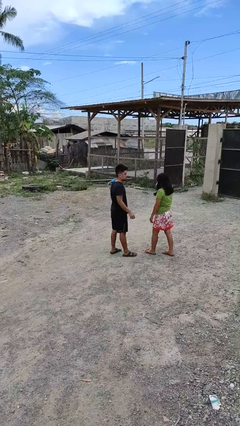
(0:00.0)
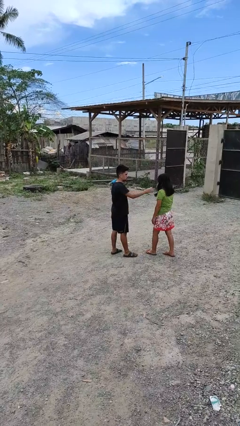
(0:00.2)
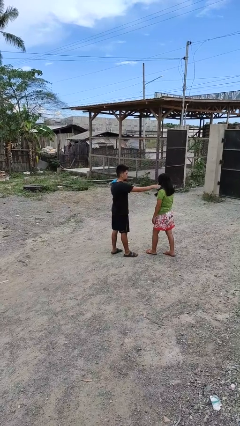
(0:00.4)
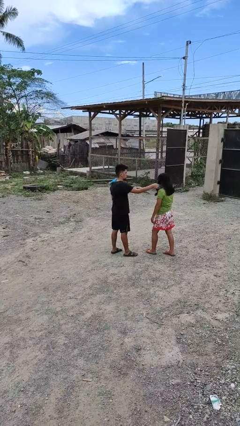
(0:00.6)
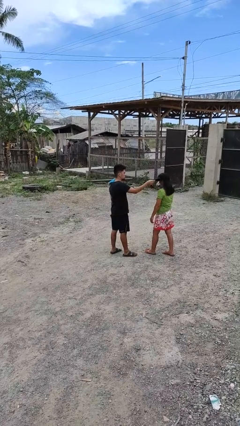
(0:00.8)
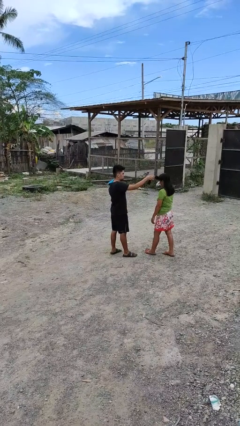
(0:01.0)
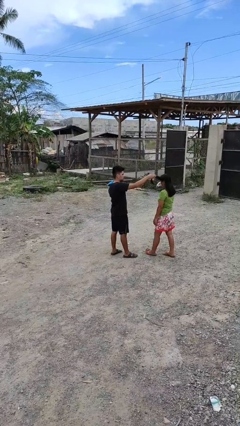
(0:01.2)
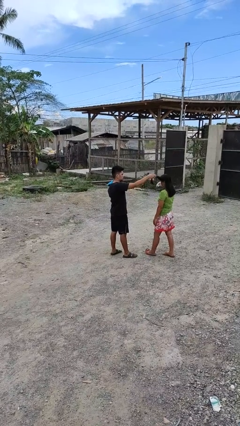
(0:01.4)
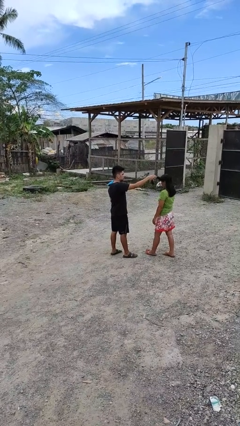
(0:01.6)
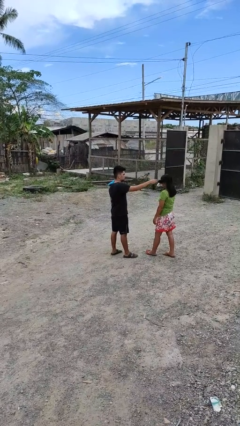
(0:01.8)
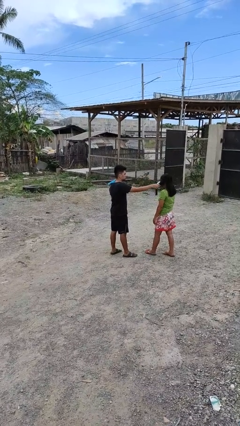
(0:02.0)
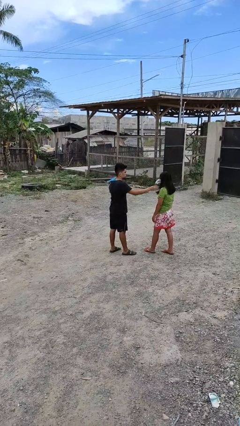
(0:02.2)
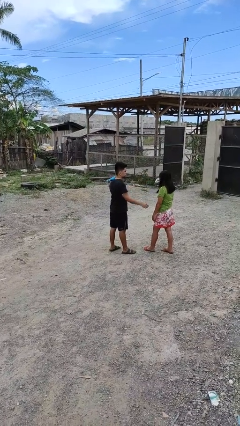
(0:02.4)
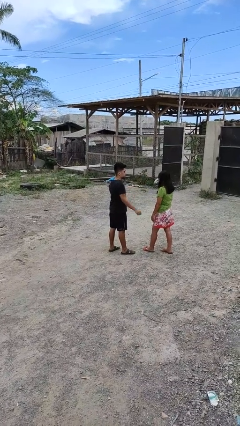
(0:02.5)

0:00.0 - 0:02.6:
person grabs person by hair

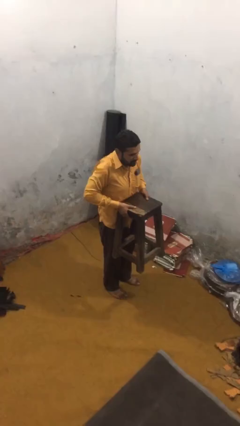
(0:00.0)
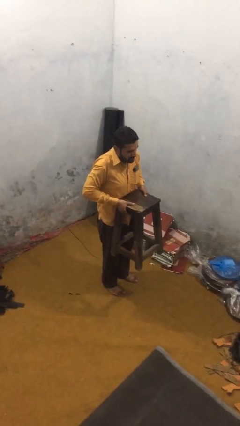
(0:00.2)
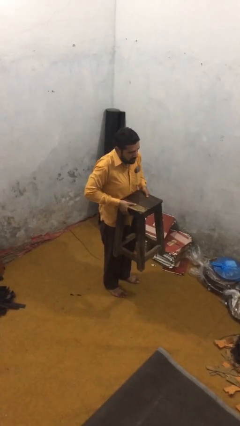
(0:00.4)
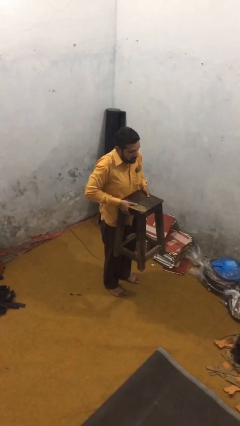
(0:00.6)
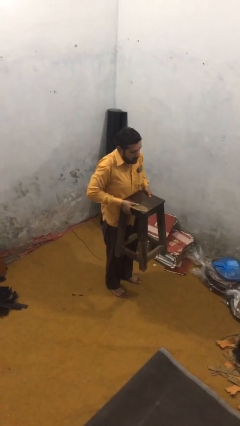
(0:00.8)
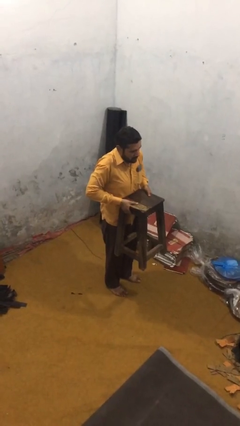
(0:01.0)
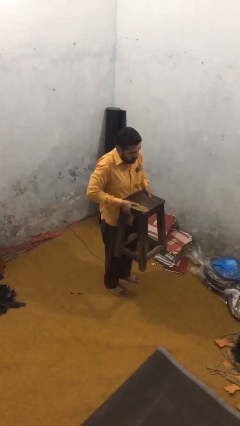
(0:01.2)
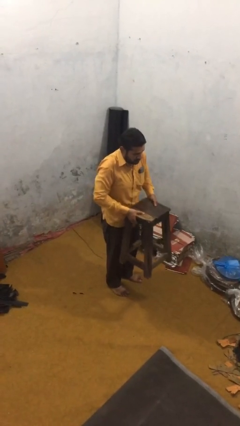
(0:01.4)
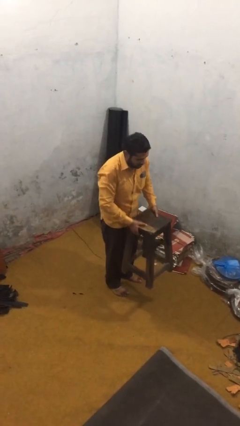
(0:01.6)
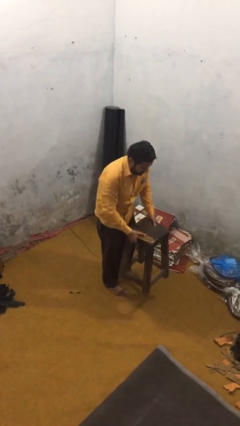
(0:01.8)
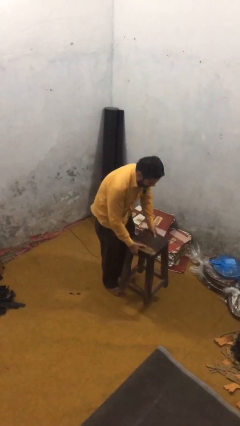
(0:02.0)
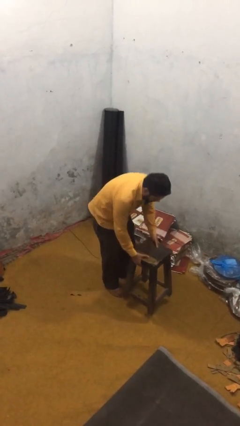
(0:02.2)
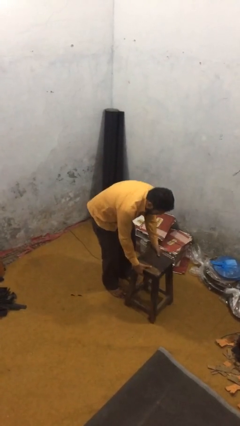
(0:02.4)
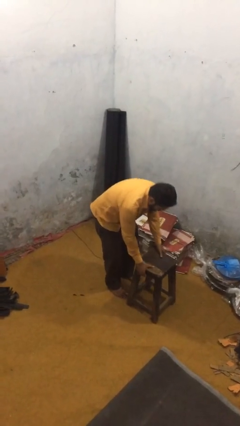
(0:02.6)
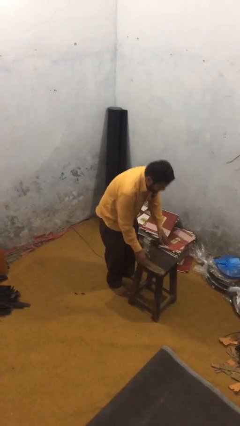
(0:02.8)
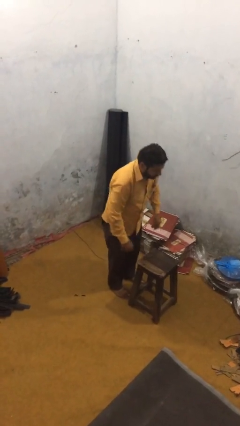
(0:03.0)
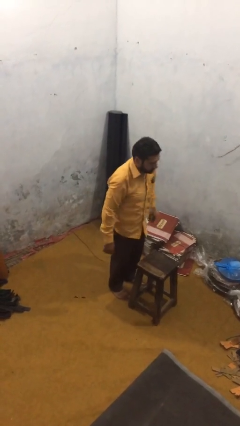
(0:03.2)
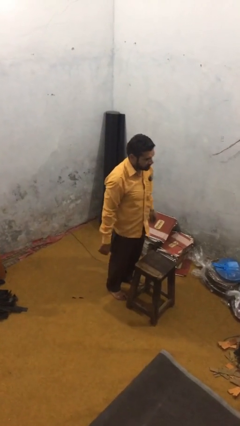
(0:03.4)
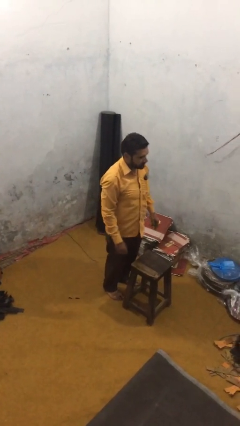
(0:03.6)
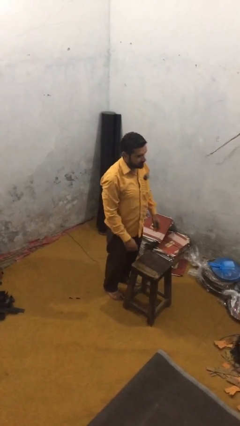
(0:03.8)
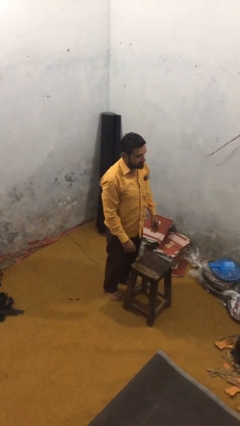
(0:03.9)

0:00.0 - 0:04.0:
person puts down object on floor

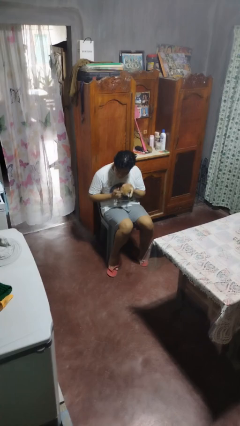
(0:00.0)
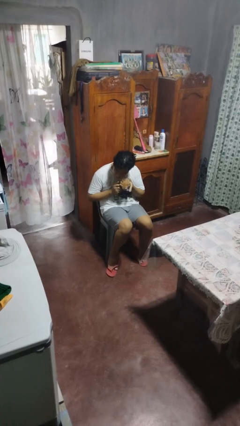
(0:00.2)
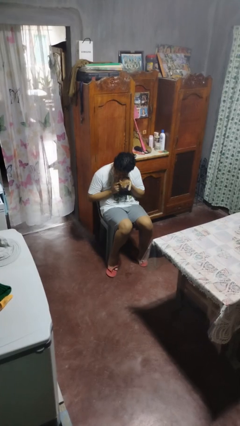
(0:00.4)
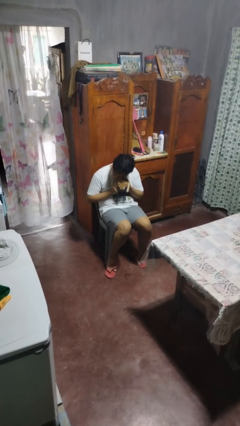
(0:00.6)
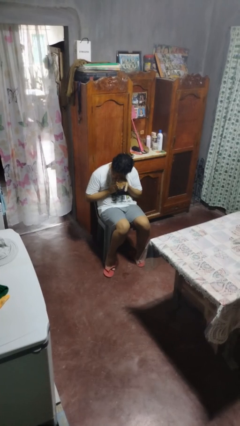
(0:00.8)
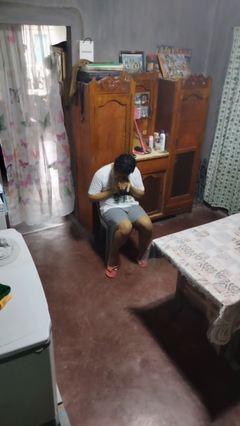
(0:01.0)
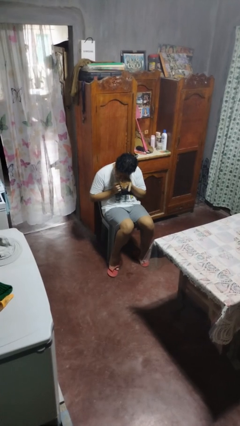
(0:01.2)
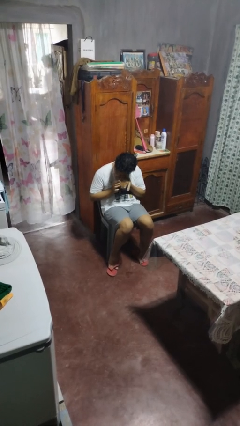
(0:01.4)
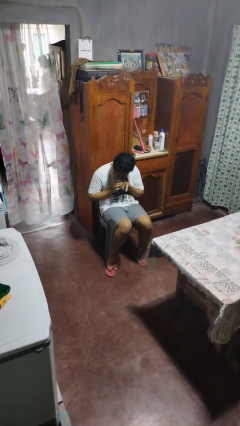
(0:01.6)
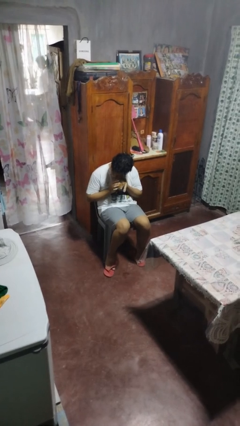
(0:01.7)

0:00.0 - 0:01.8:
person hugs cat

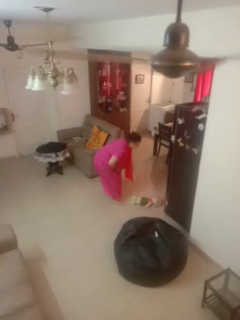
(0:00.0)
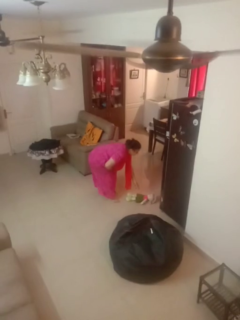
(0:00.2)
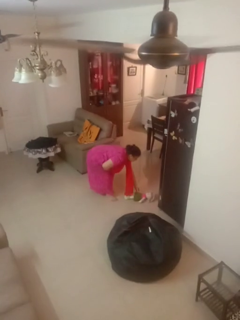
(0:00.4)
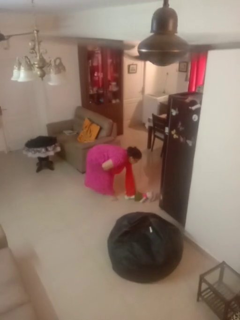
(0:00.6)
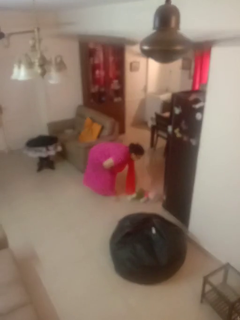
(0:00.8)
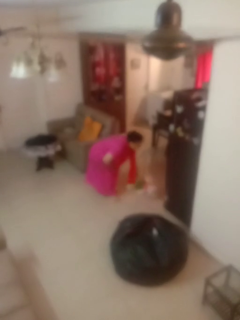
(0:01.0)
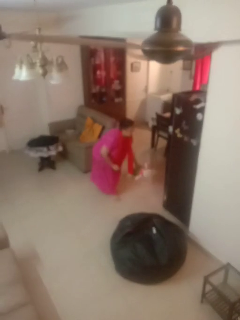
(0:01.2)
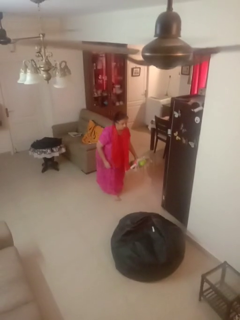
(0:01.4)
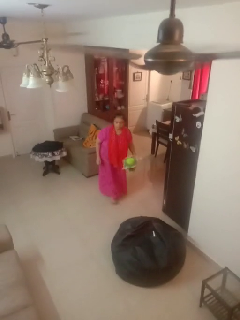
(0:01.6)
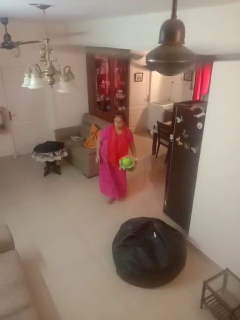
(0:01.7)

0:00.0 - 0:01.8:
person picks up object from floor

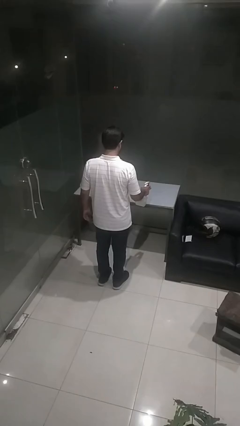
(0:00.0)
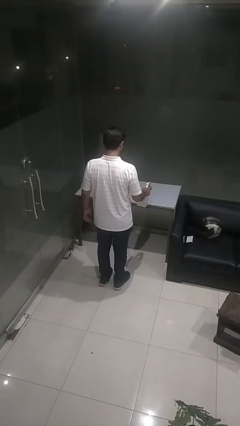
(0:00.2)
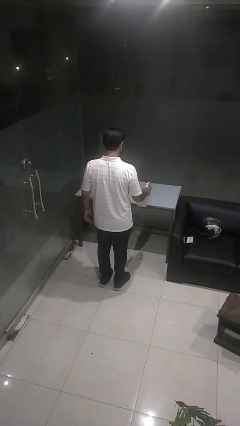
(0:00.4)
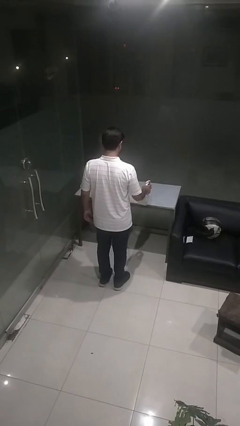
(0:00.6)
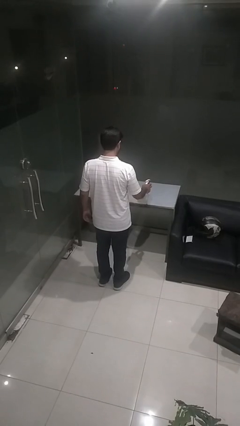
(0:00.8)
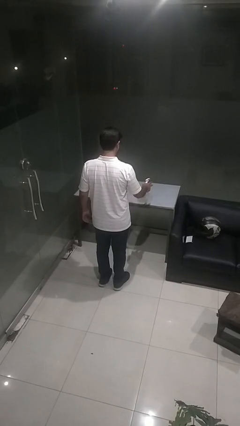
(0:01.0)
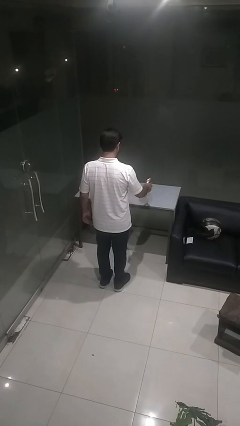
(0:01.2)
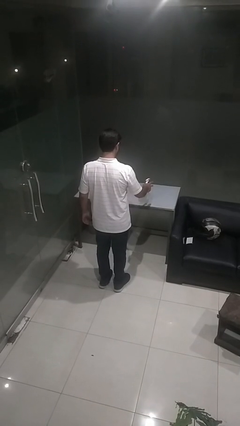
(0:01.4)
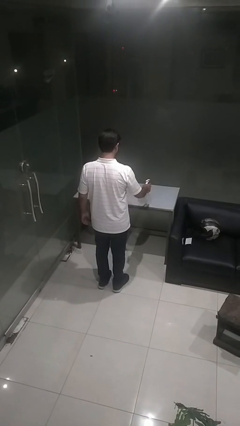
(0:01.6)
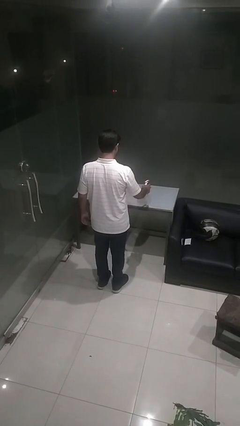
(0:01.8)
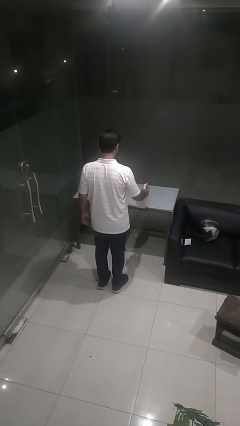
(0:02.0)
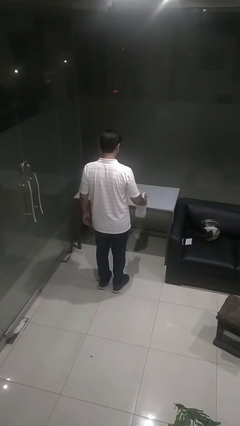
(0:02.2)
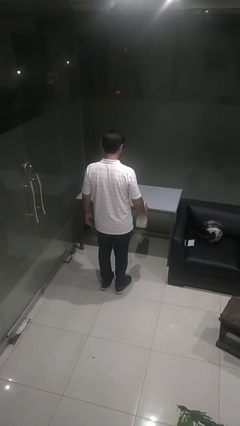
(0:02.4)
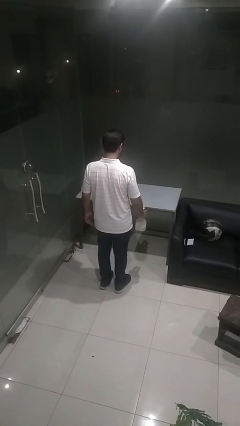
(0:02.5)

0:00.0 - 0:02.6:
person sprays from bottle

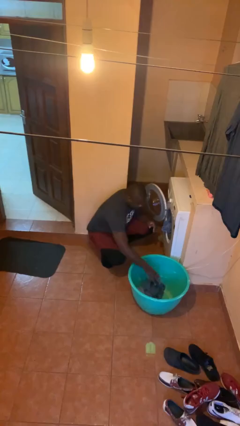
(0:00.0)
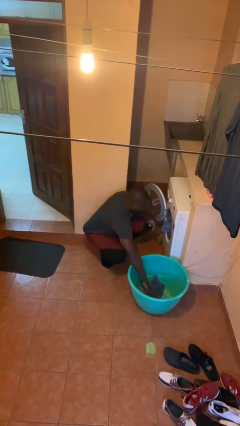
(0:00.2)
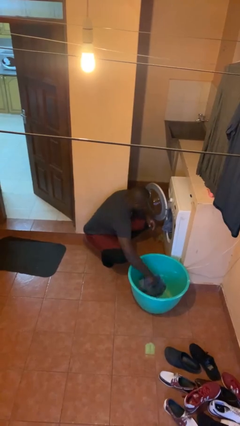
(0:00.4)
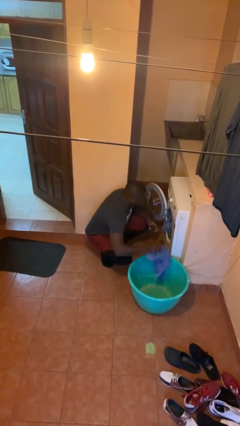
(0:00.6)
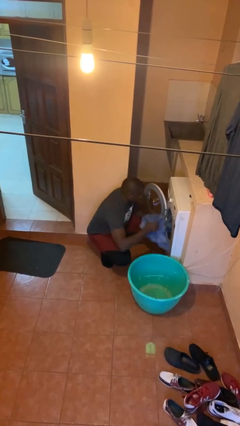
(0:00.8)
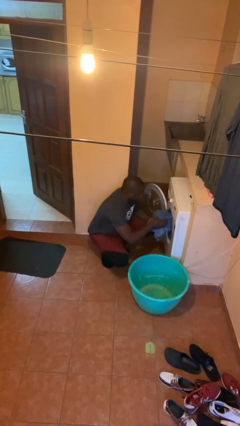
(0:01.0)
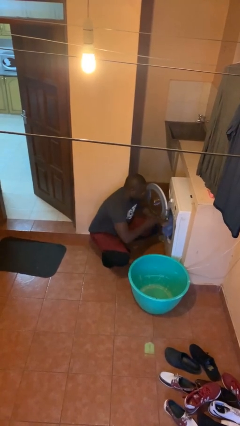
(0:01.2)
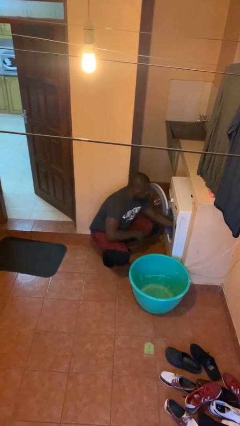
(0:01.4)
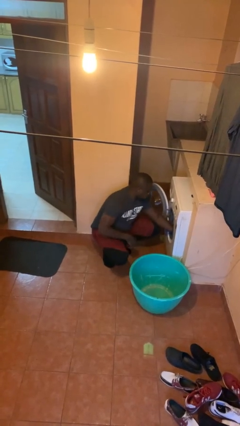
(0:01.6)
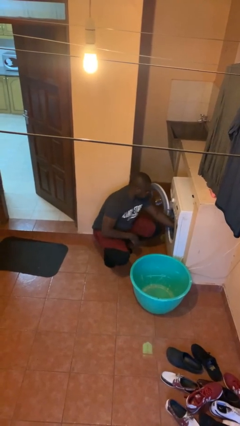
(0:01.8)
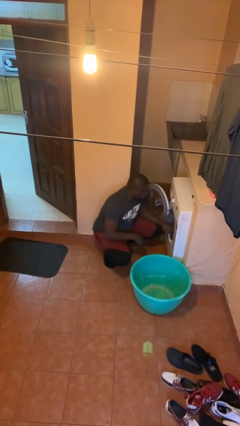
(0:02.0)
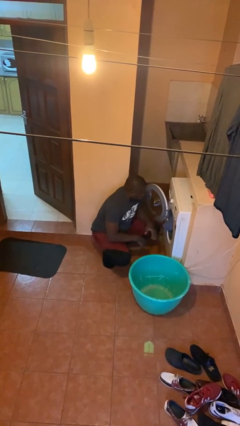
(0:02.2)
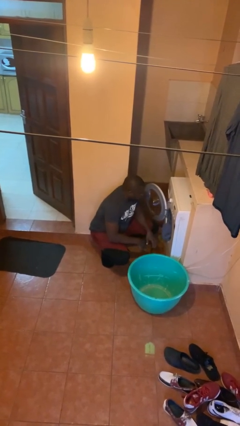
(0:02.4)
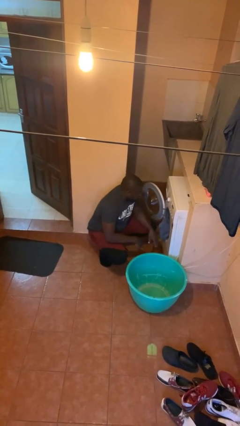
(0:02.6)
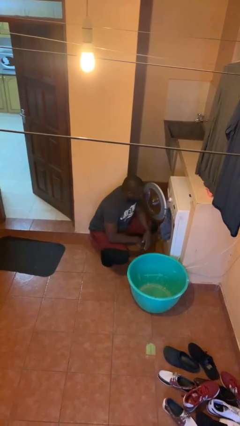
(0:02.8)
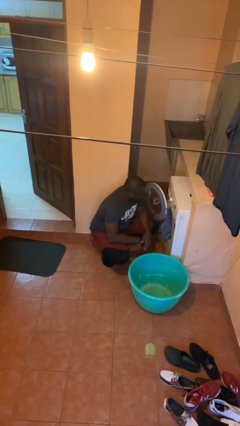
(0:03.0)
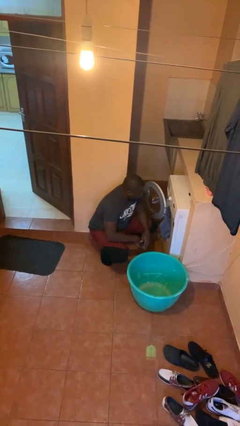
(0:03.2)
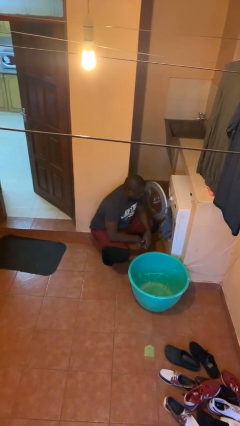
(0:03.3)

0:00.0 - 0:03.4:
person loads clotheswasher

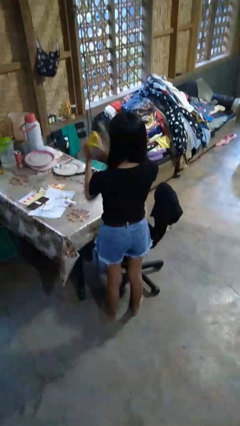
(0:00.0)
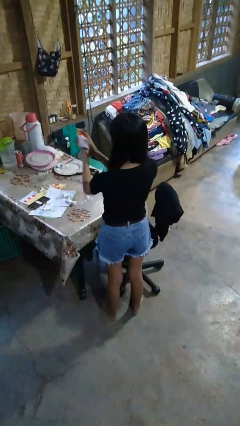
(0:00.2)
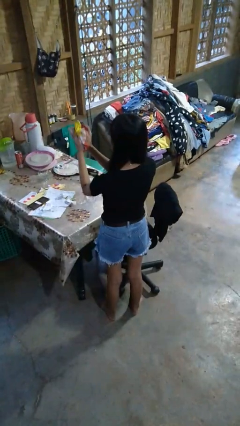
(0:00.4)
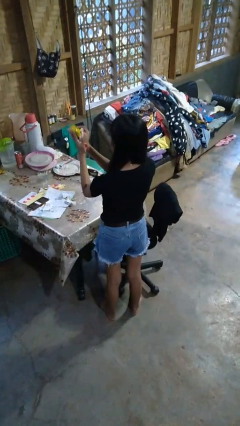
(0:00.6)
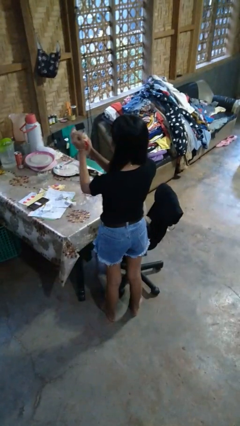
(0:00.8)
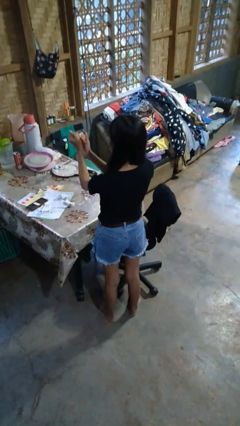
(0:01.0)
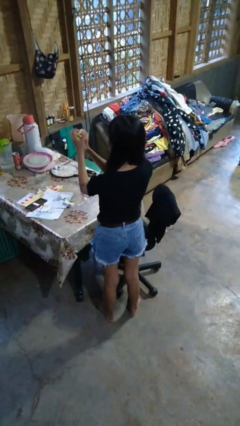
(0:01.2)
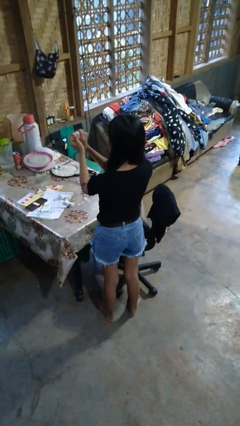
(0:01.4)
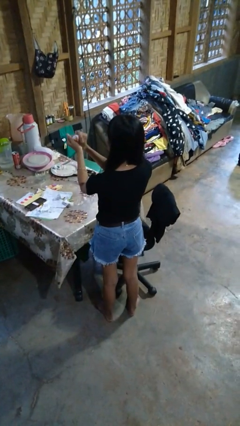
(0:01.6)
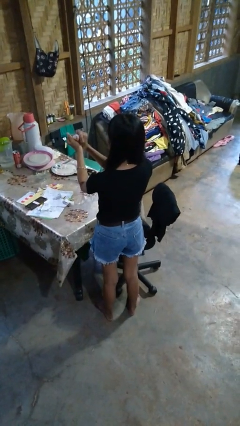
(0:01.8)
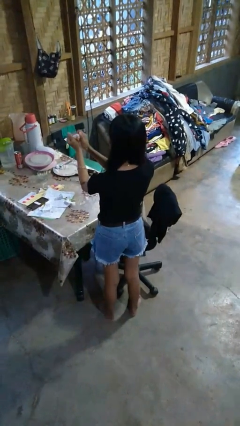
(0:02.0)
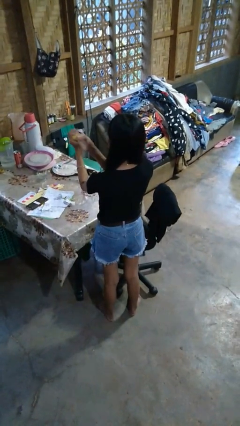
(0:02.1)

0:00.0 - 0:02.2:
person crumples paper
